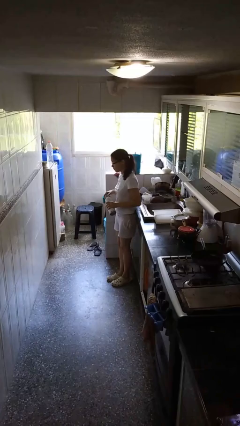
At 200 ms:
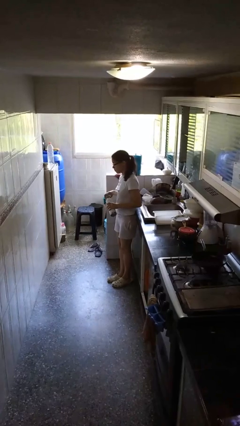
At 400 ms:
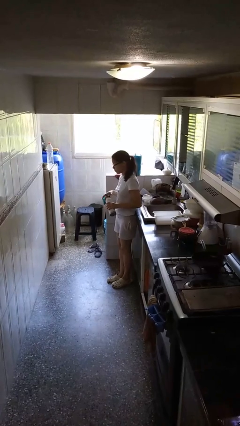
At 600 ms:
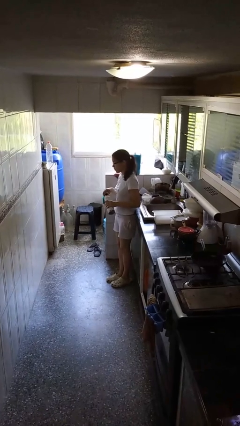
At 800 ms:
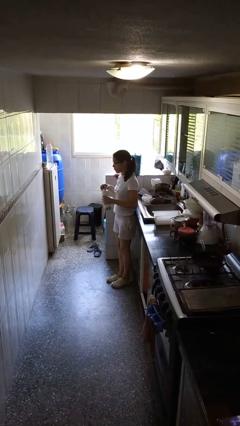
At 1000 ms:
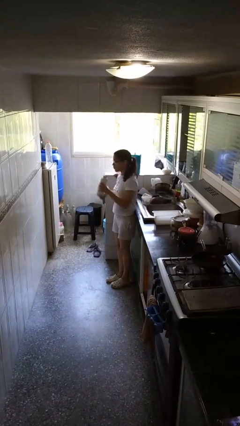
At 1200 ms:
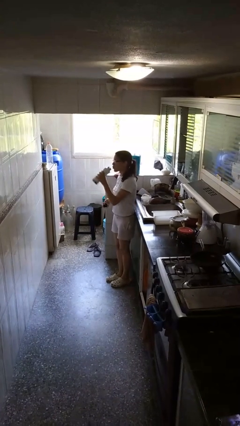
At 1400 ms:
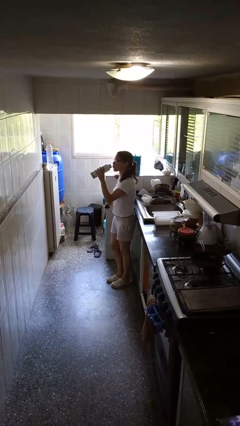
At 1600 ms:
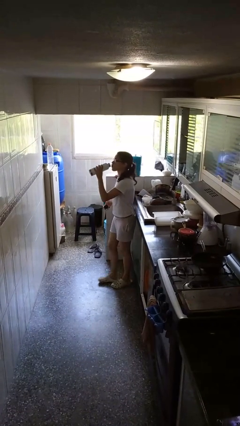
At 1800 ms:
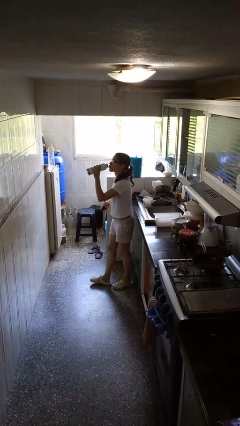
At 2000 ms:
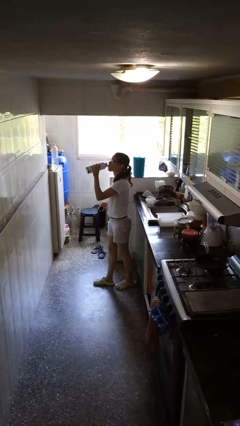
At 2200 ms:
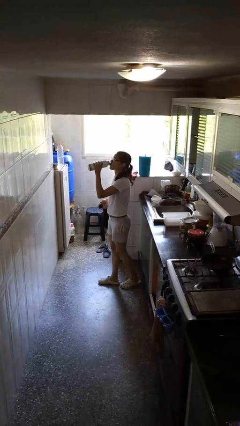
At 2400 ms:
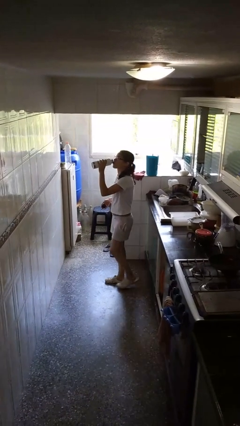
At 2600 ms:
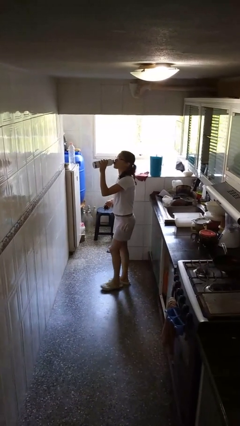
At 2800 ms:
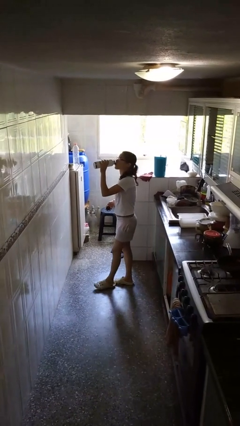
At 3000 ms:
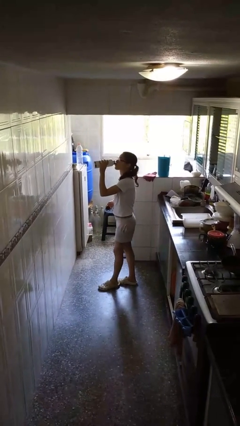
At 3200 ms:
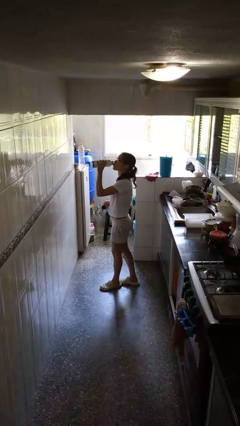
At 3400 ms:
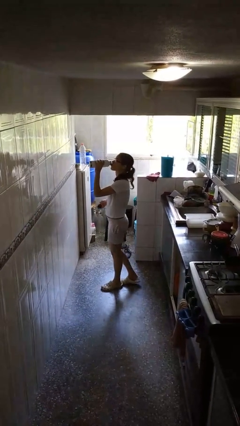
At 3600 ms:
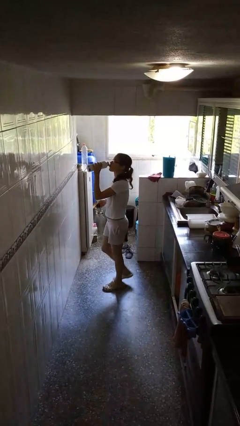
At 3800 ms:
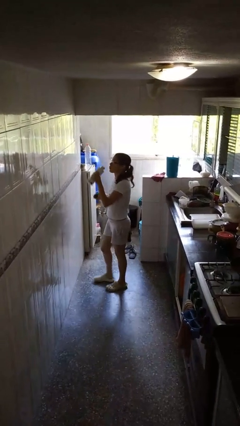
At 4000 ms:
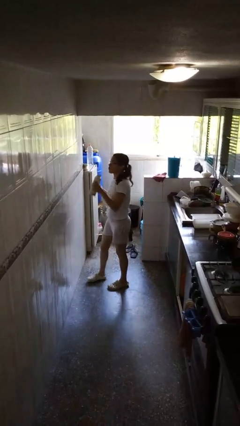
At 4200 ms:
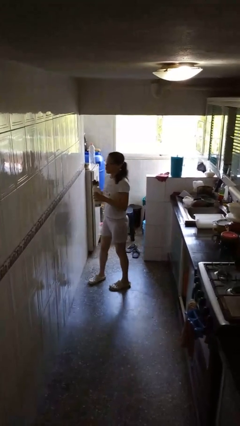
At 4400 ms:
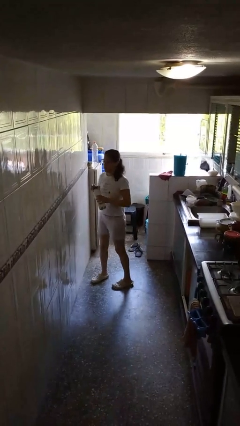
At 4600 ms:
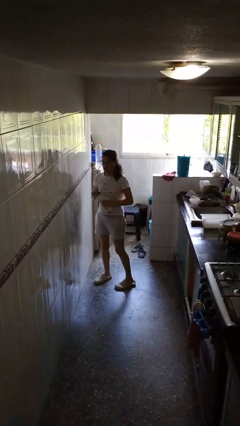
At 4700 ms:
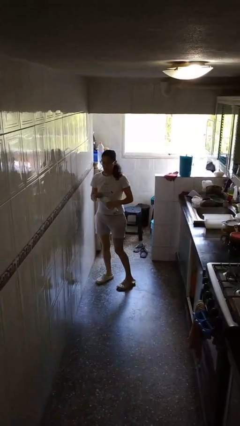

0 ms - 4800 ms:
person drinks from bottle

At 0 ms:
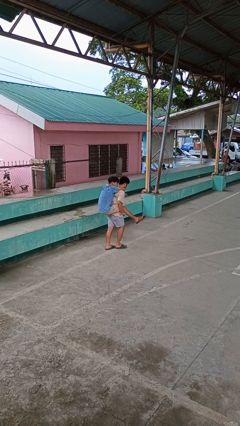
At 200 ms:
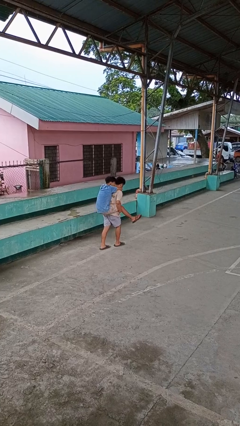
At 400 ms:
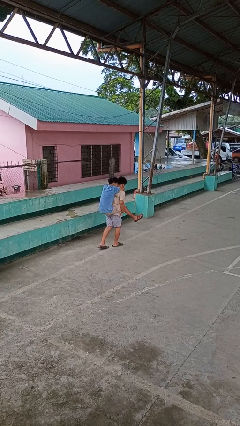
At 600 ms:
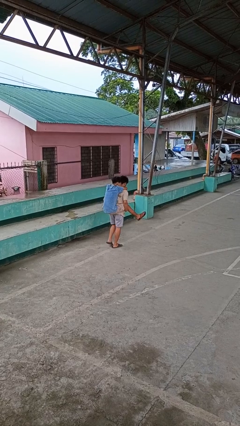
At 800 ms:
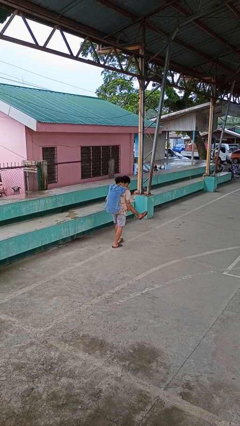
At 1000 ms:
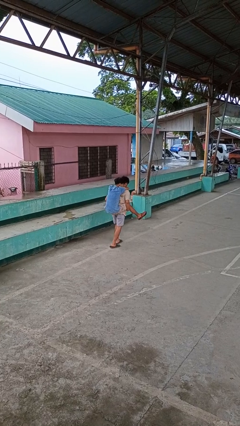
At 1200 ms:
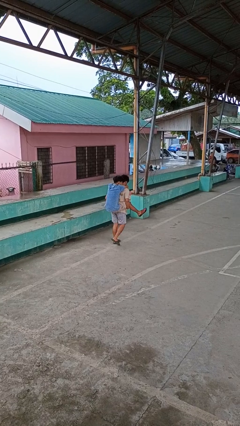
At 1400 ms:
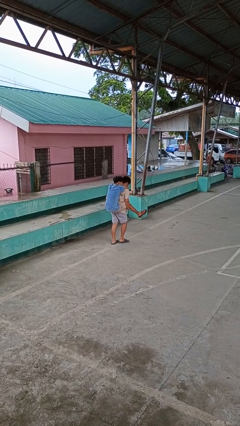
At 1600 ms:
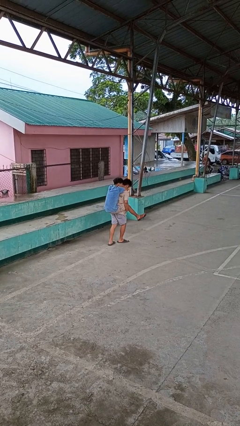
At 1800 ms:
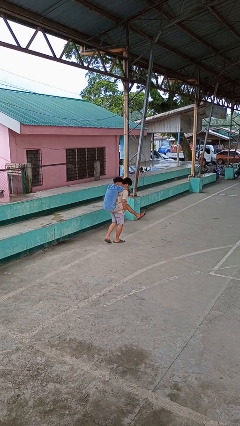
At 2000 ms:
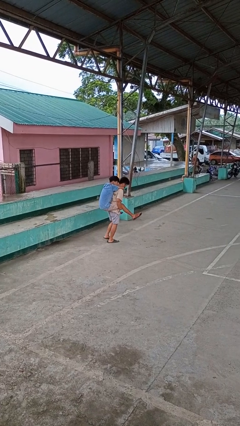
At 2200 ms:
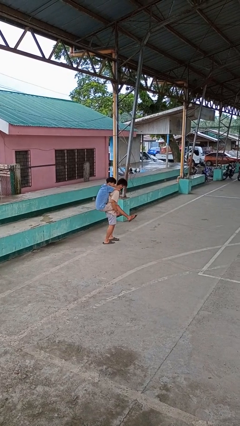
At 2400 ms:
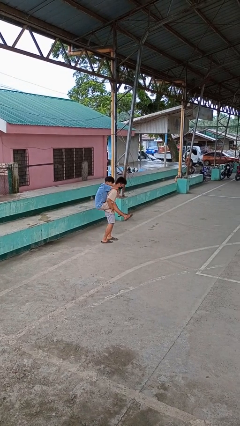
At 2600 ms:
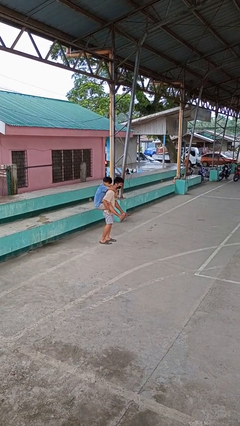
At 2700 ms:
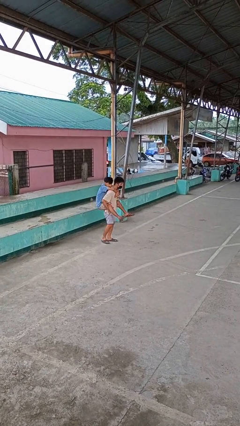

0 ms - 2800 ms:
person carries person on back

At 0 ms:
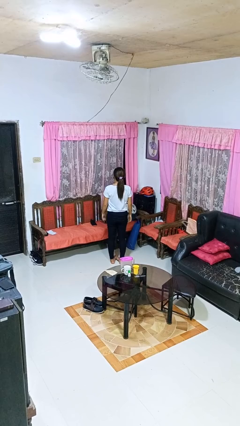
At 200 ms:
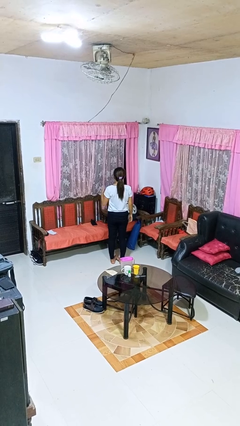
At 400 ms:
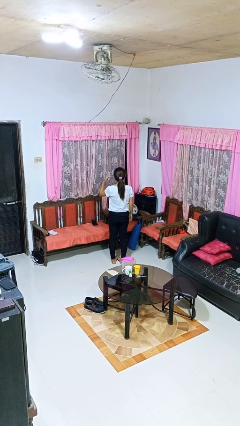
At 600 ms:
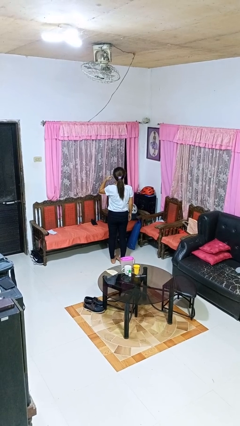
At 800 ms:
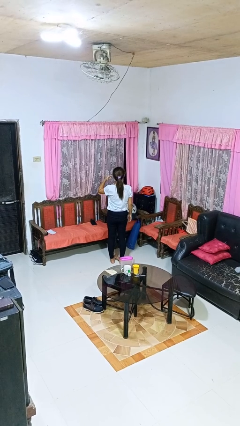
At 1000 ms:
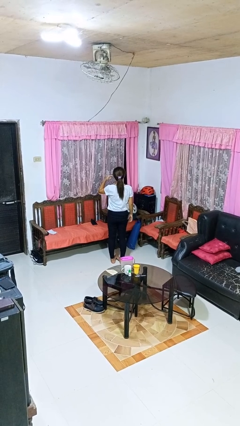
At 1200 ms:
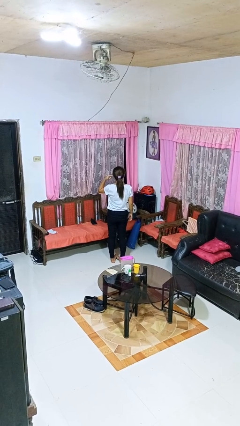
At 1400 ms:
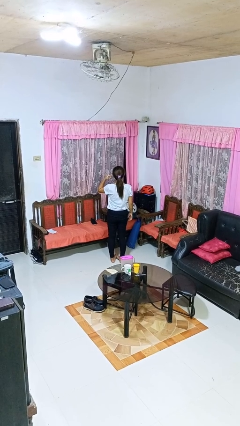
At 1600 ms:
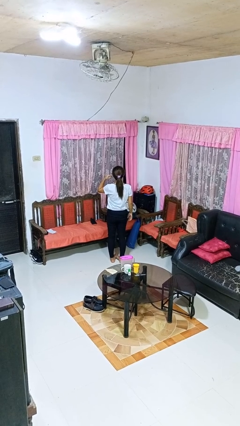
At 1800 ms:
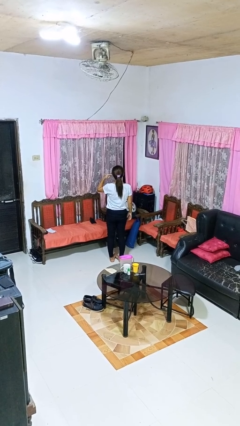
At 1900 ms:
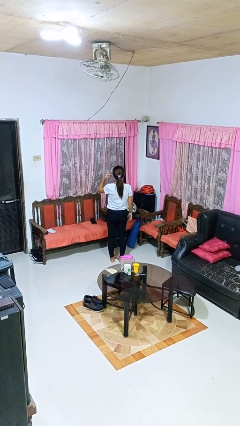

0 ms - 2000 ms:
person gestures listen closely

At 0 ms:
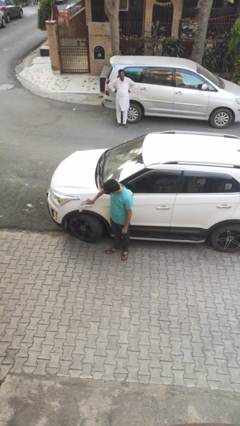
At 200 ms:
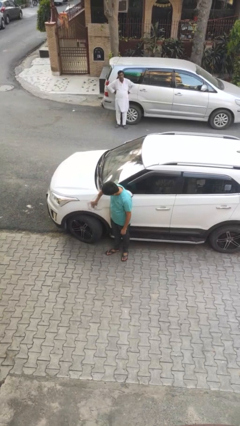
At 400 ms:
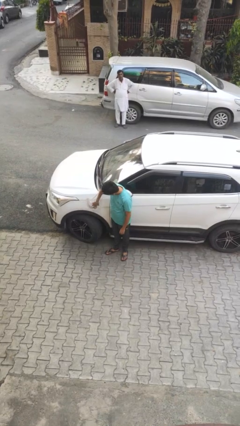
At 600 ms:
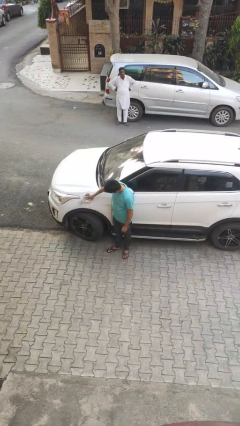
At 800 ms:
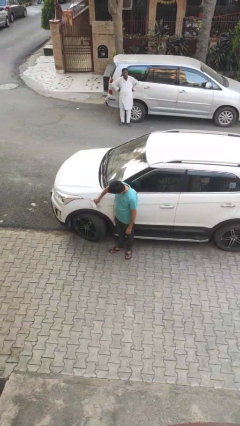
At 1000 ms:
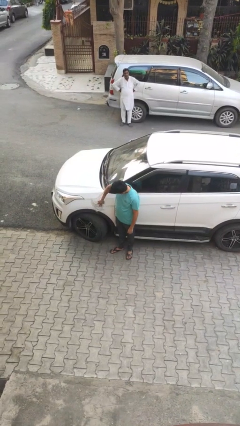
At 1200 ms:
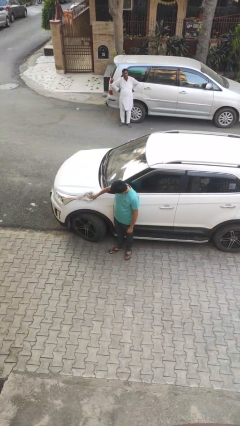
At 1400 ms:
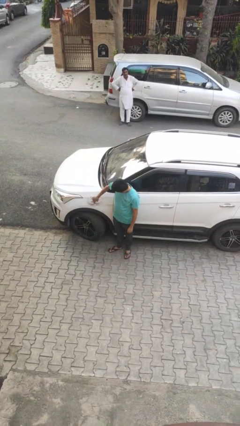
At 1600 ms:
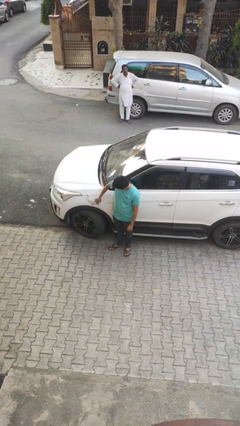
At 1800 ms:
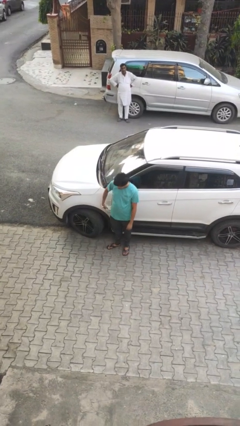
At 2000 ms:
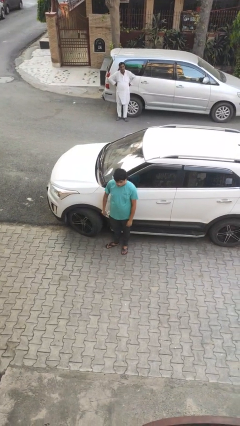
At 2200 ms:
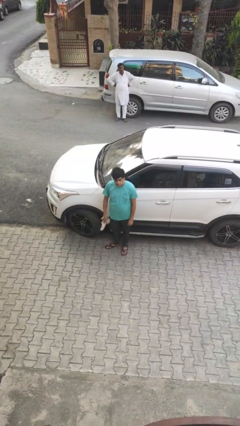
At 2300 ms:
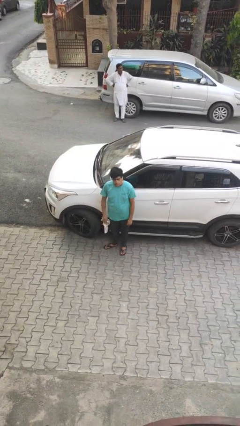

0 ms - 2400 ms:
person polishes car with rag

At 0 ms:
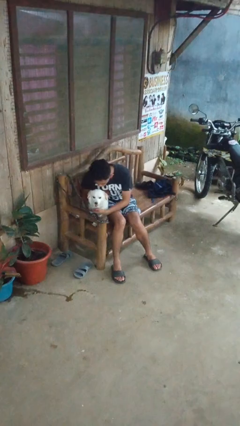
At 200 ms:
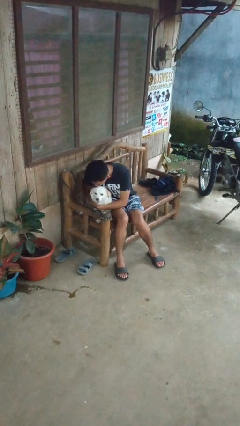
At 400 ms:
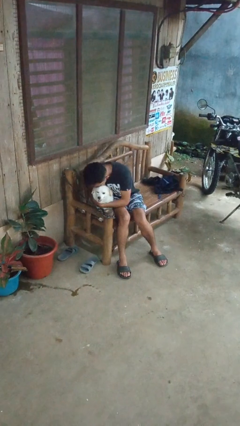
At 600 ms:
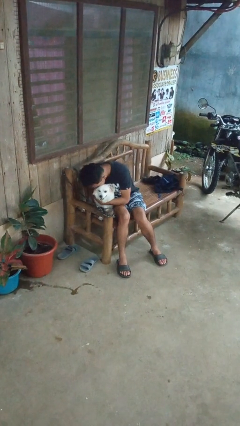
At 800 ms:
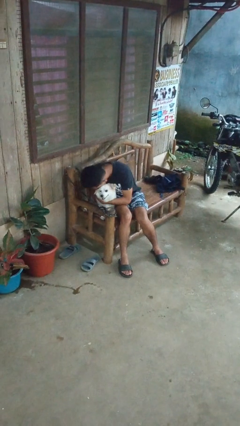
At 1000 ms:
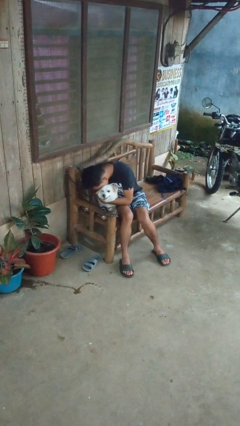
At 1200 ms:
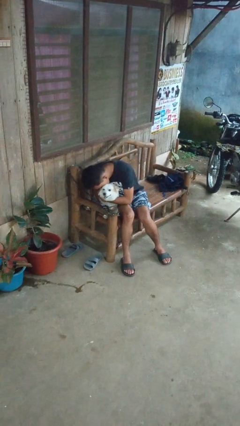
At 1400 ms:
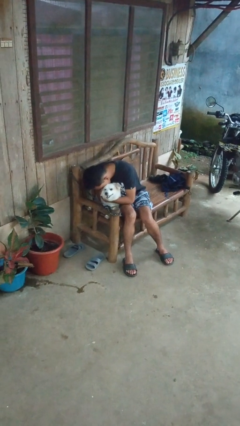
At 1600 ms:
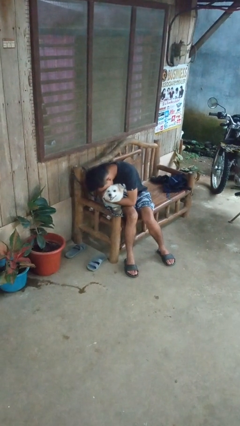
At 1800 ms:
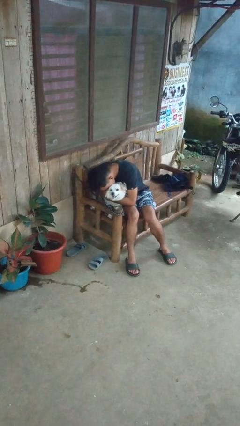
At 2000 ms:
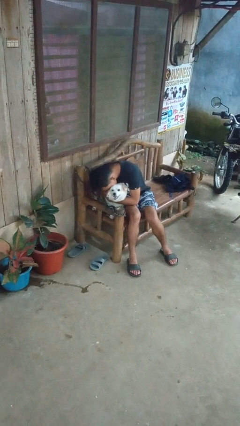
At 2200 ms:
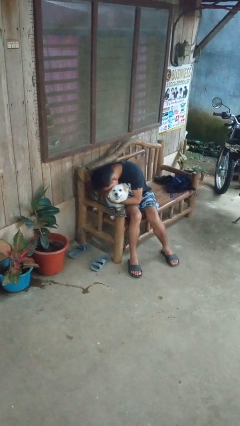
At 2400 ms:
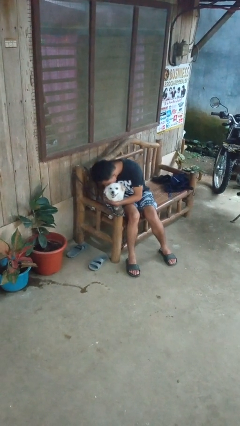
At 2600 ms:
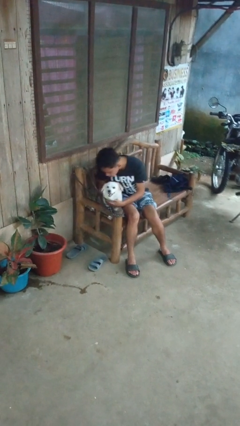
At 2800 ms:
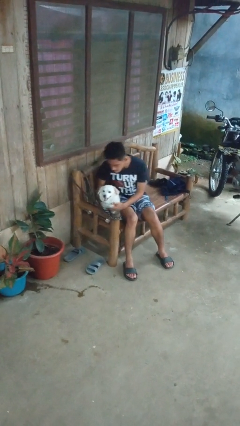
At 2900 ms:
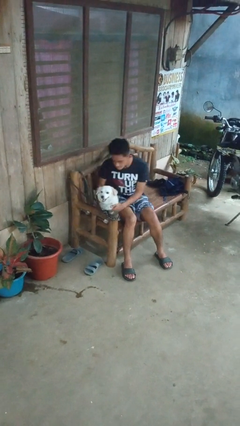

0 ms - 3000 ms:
person hugs dog

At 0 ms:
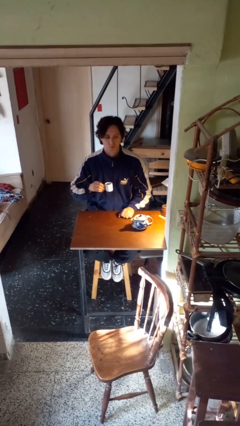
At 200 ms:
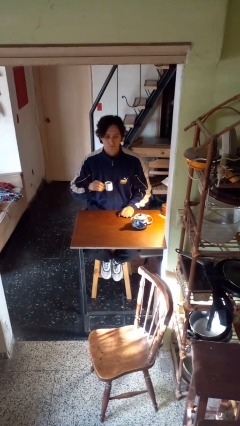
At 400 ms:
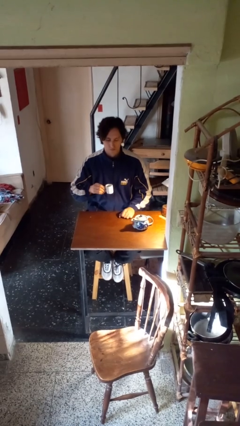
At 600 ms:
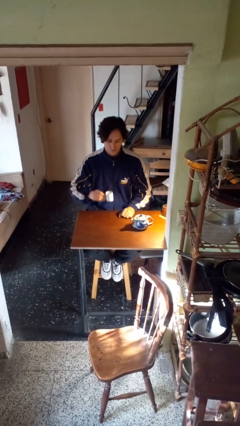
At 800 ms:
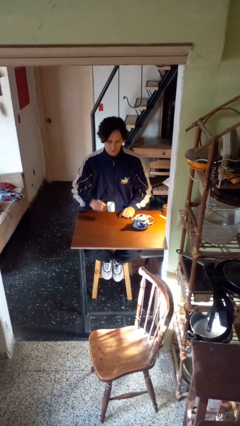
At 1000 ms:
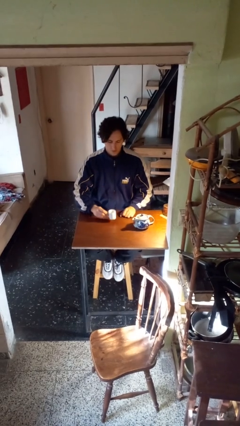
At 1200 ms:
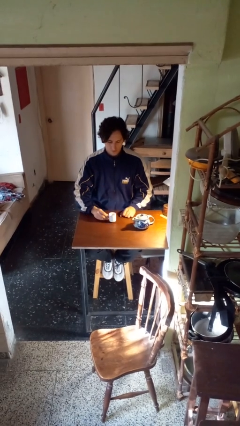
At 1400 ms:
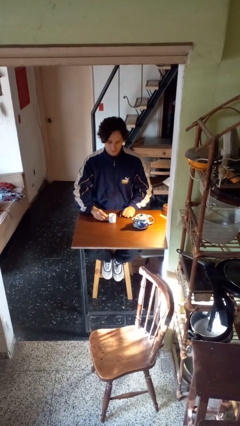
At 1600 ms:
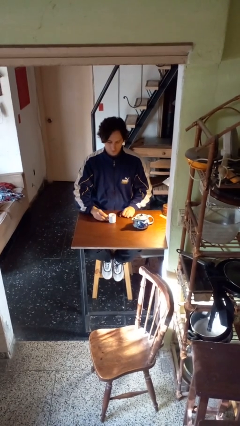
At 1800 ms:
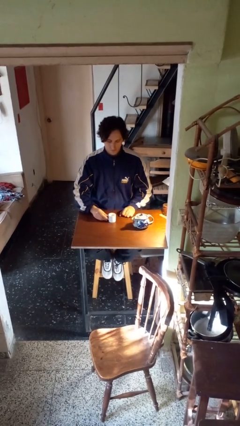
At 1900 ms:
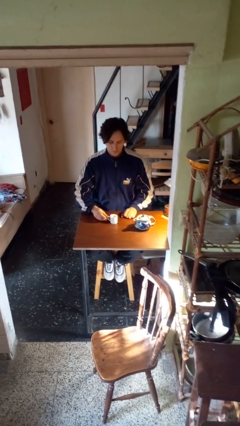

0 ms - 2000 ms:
person puts down object on table
